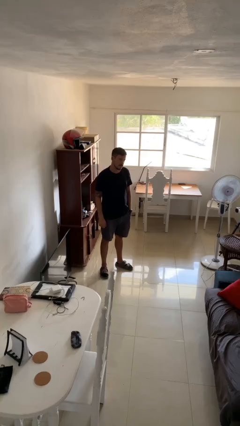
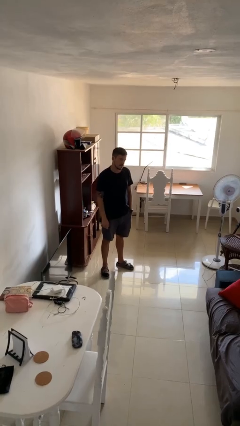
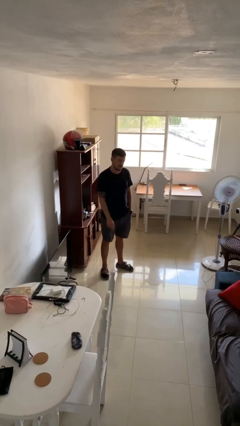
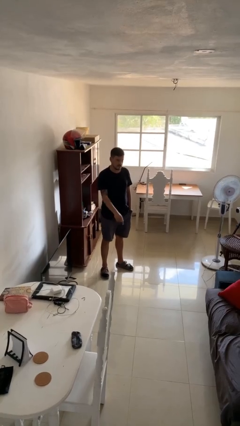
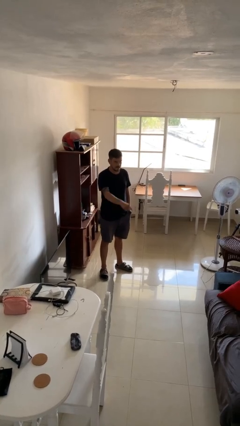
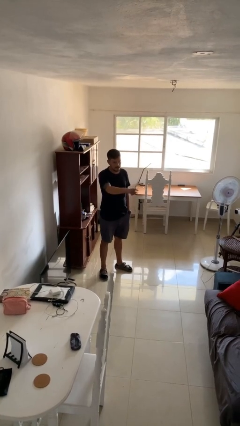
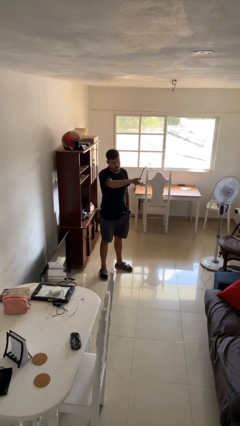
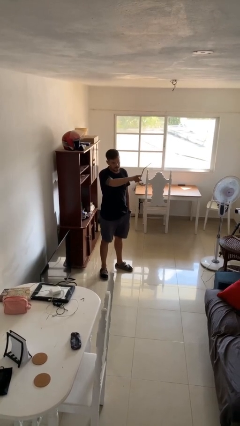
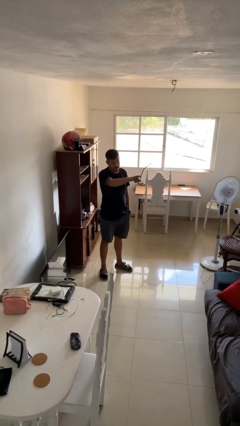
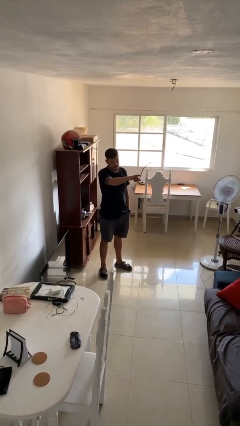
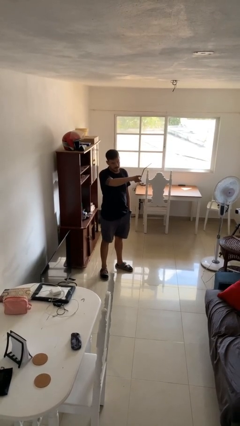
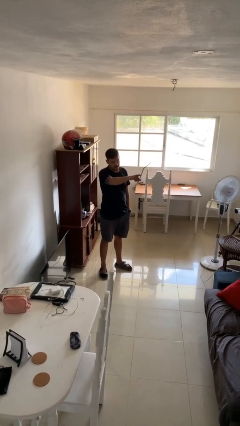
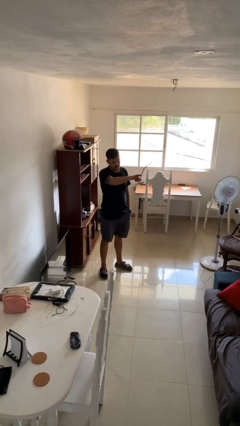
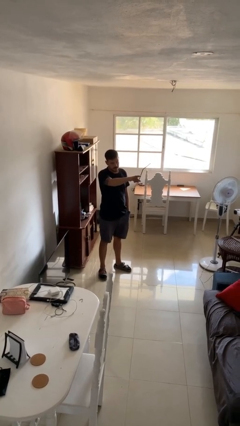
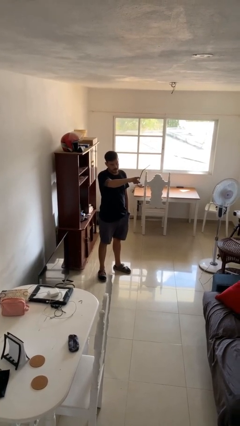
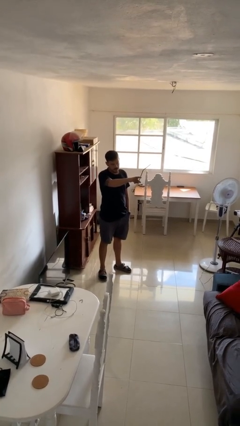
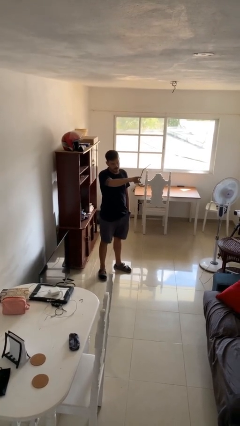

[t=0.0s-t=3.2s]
person points at person

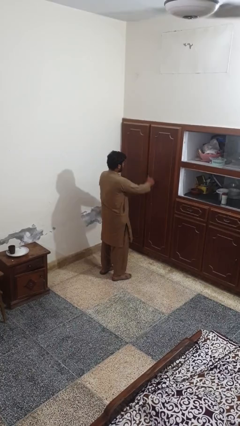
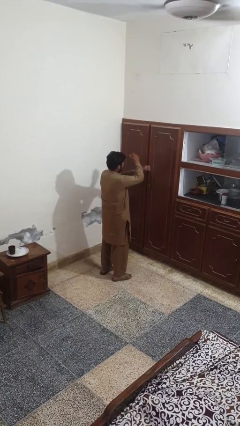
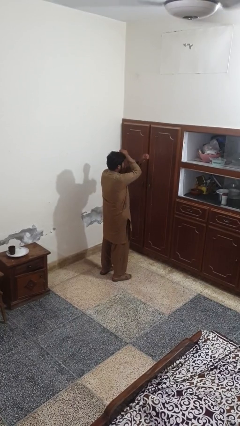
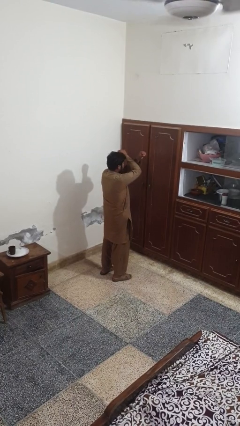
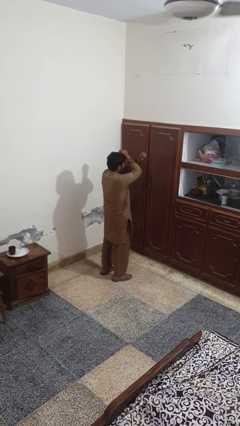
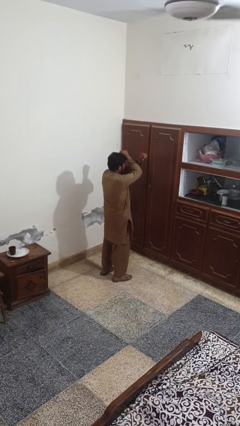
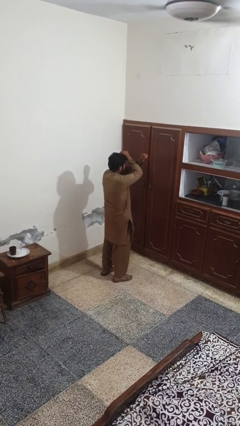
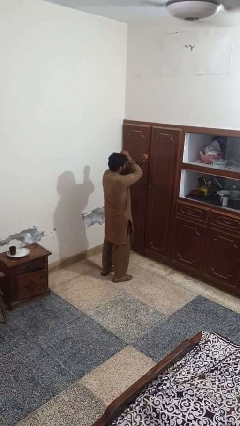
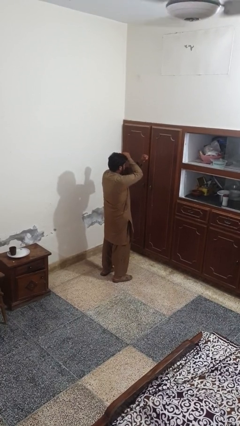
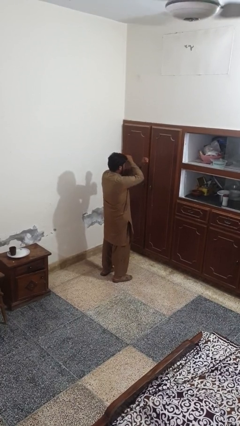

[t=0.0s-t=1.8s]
person gestures arms x

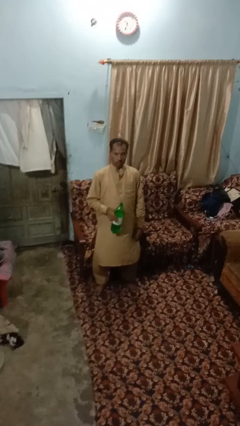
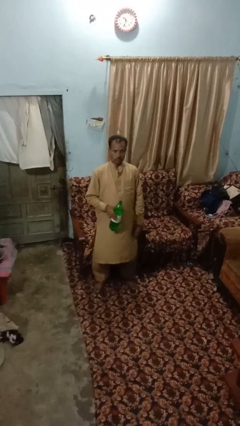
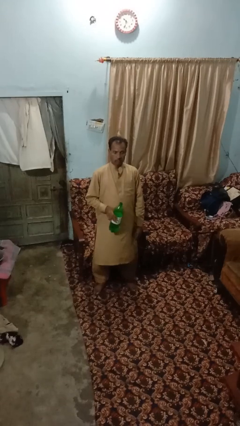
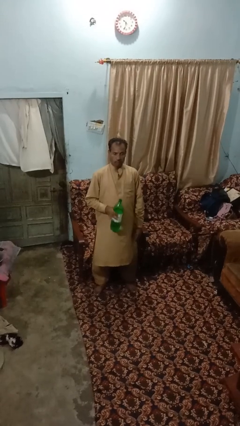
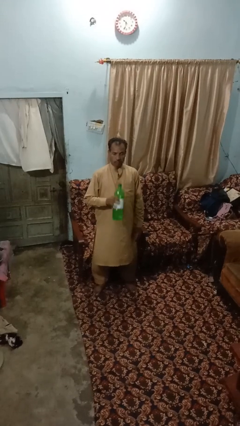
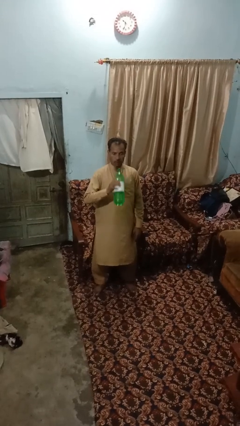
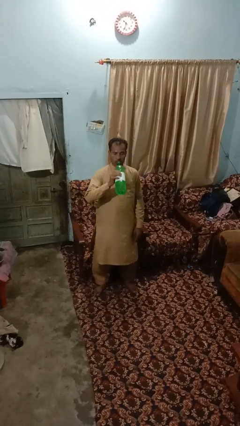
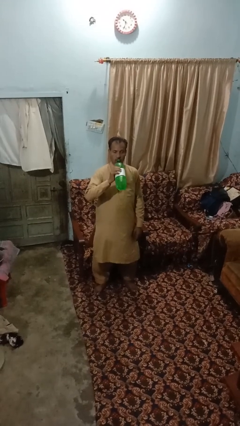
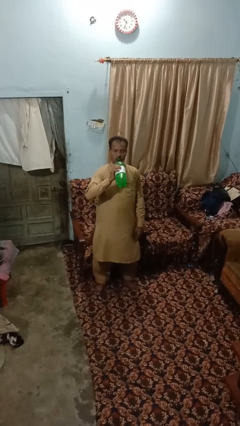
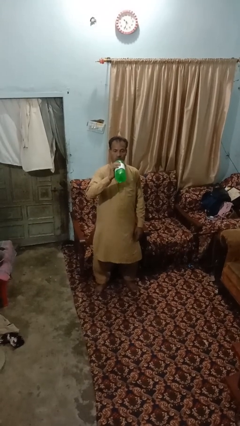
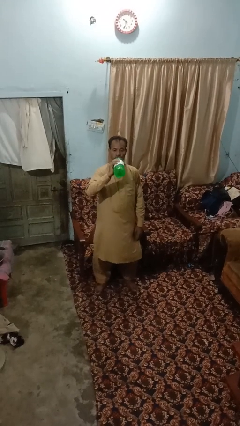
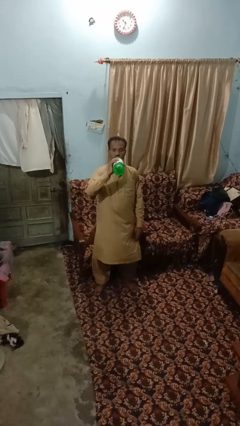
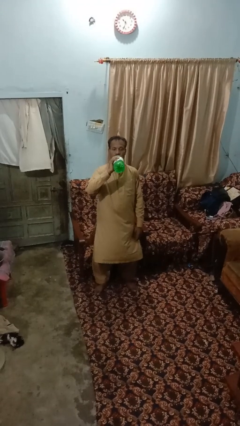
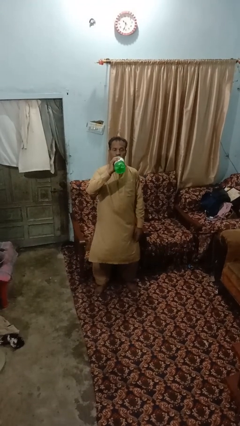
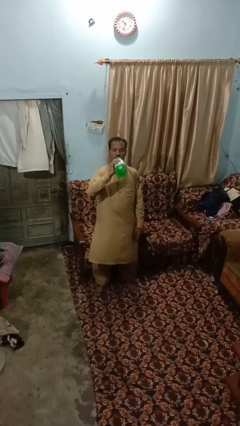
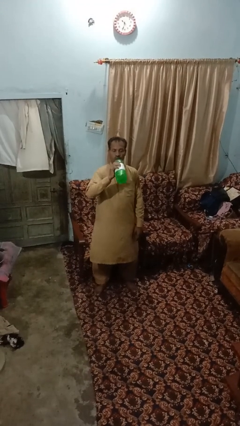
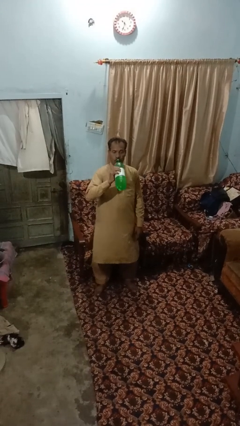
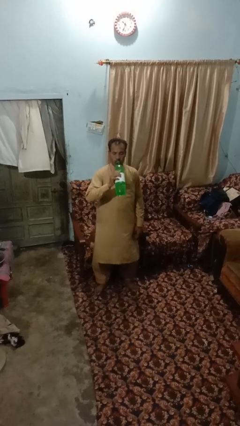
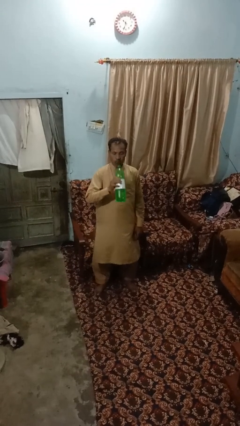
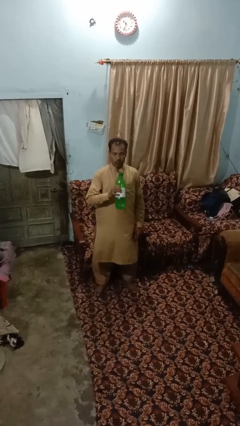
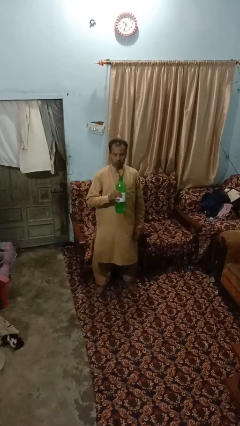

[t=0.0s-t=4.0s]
person drinks from bottle

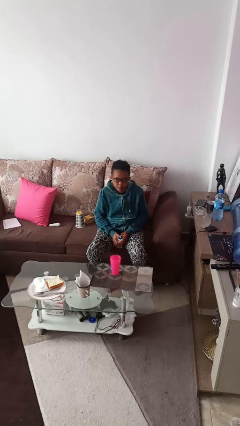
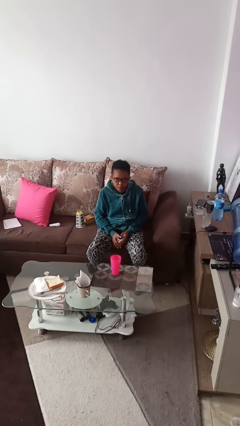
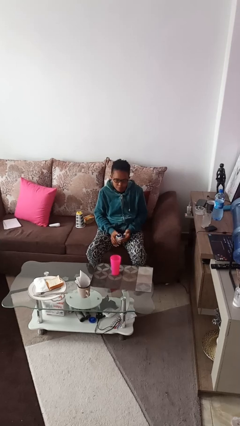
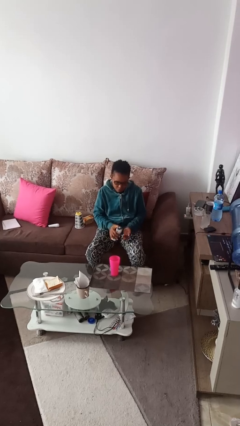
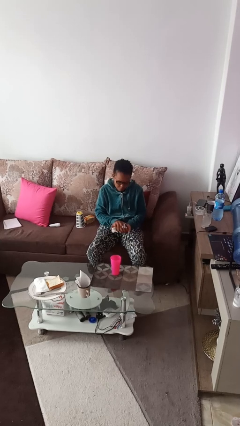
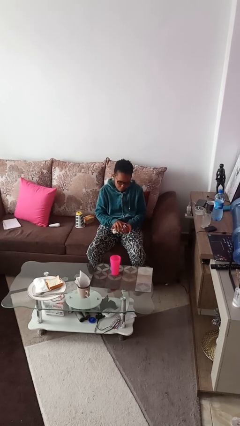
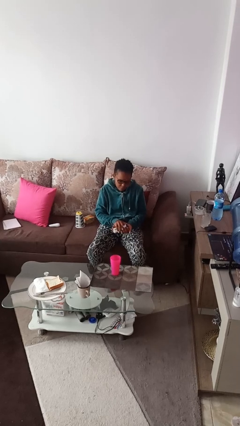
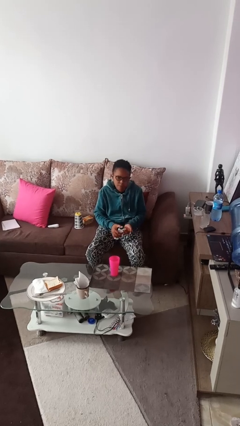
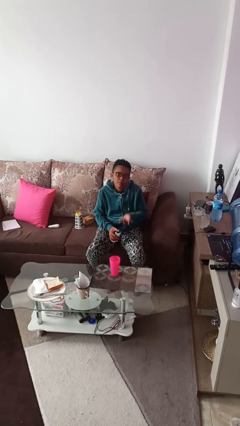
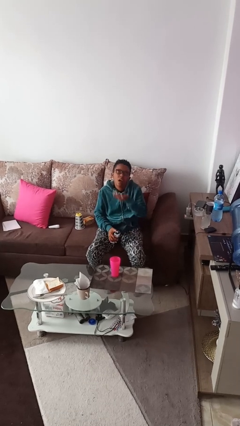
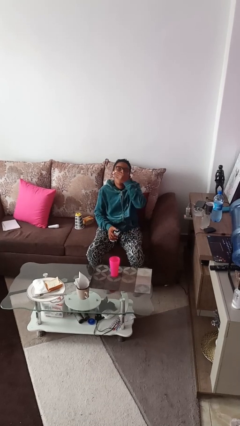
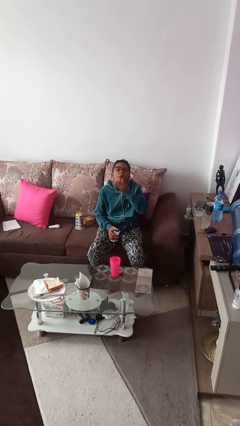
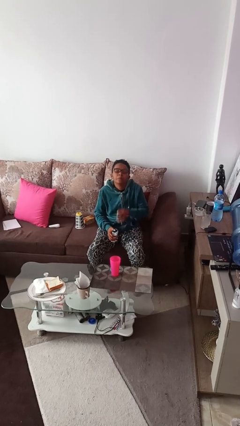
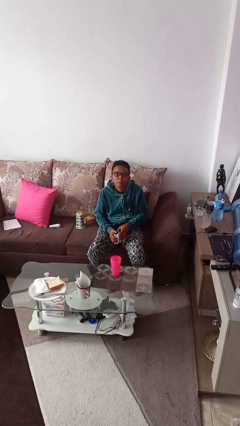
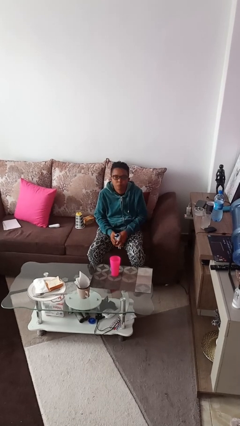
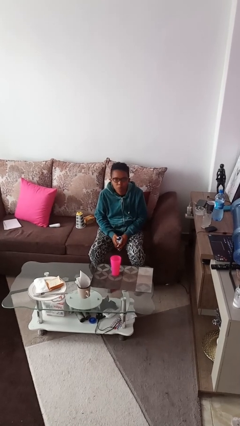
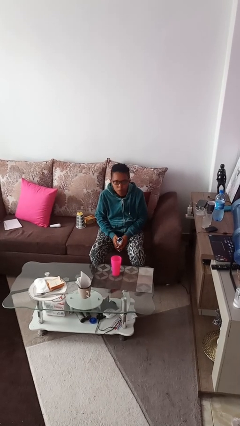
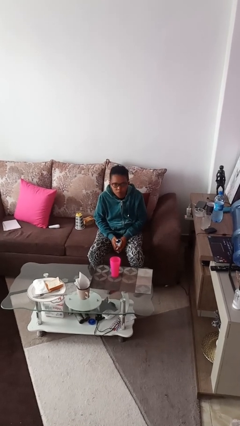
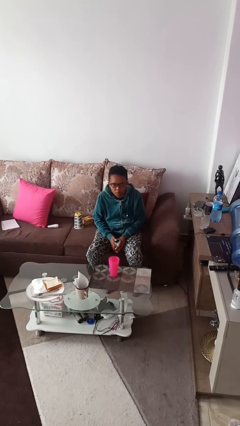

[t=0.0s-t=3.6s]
person takes medicine pills

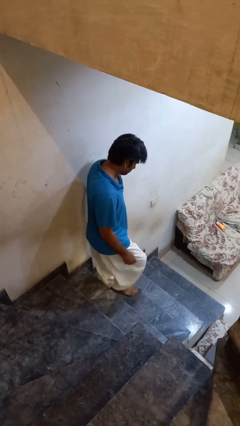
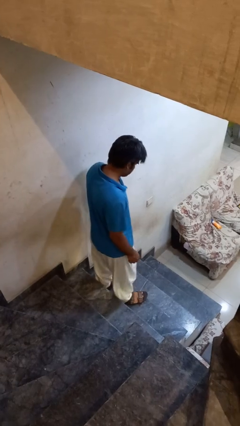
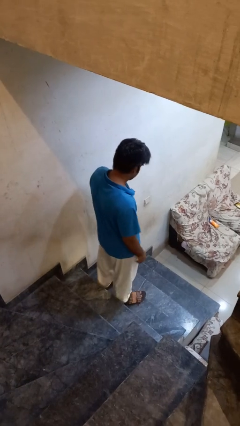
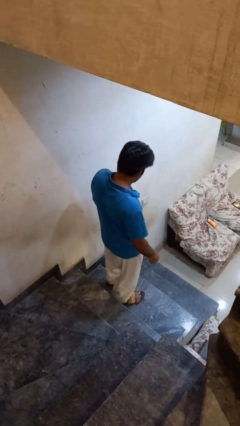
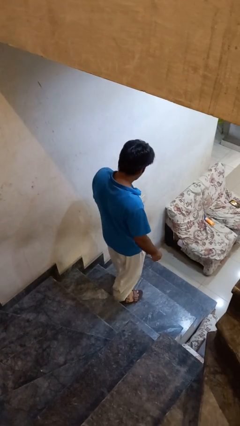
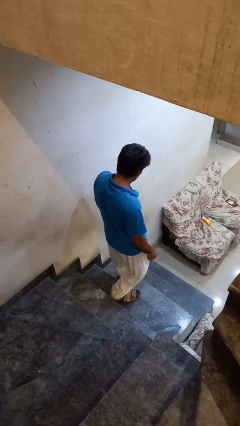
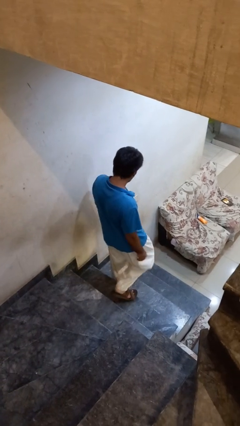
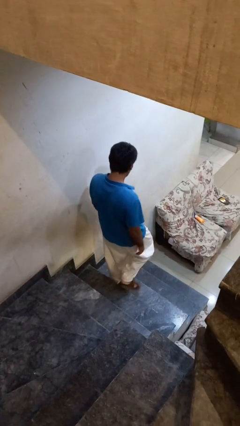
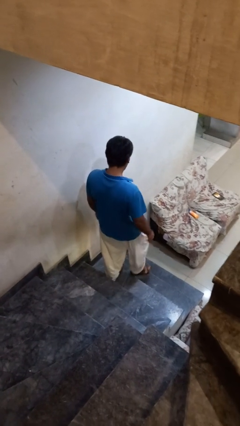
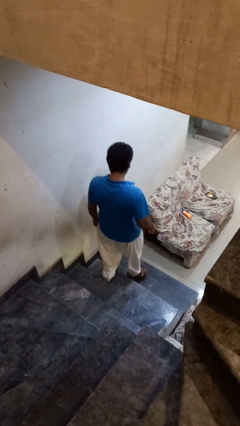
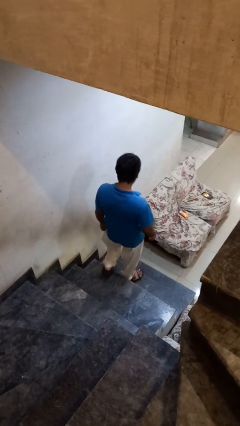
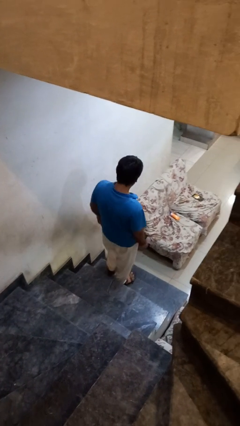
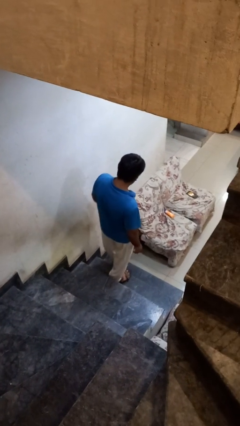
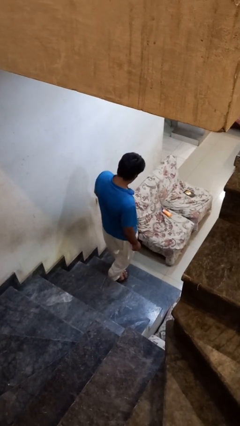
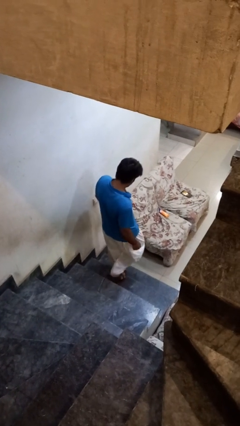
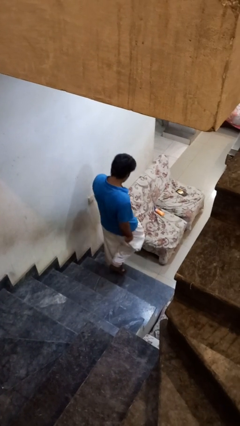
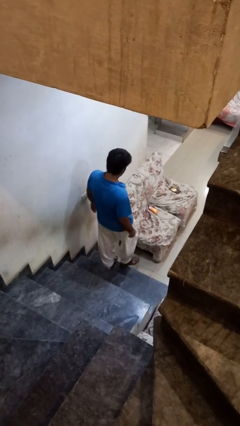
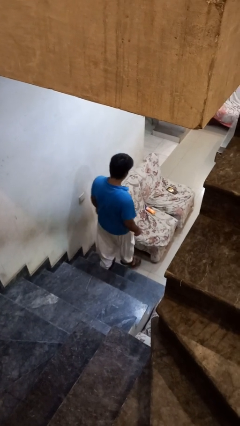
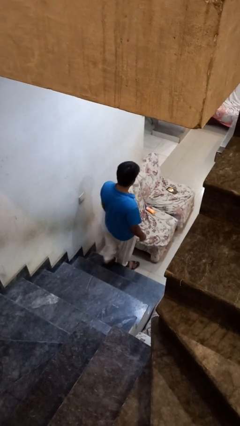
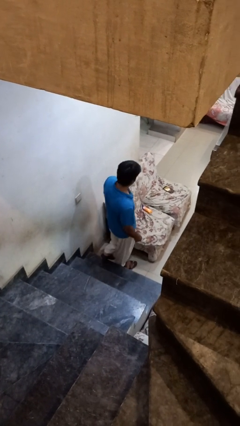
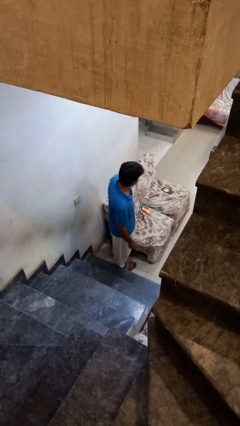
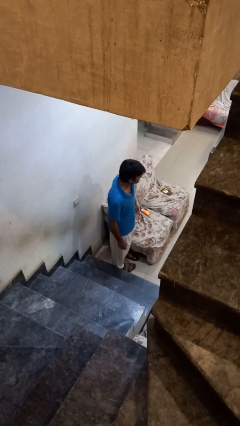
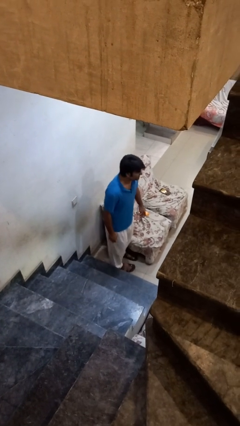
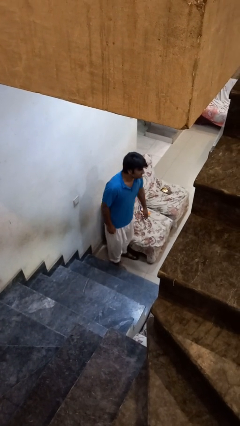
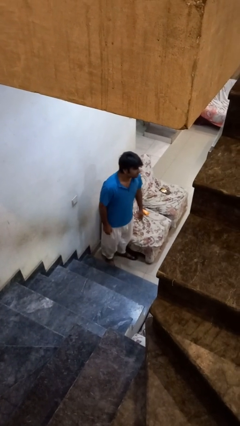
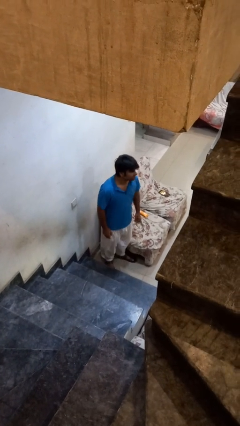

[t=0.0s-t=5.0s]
person climbs down stairs

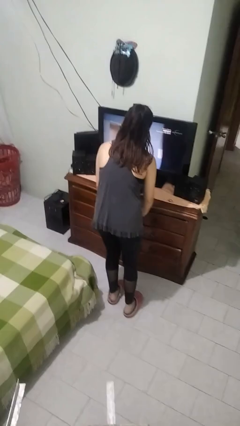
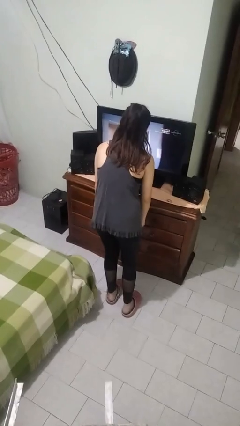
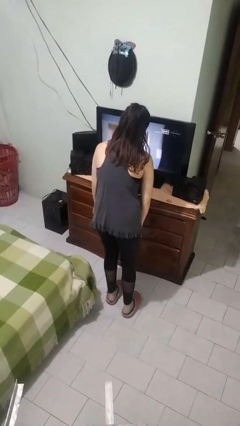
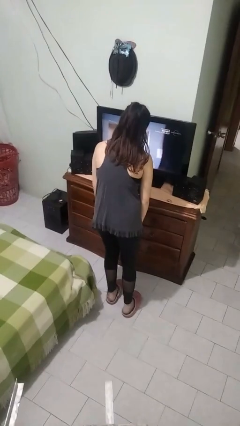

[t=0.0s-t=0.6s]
person closes dresser drawer
